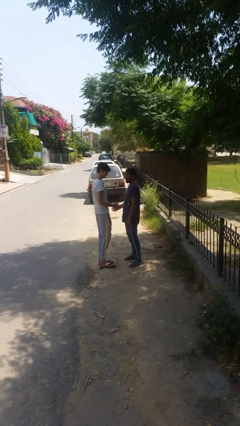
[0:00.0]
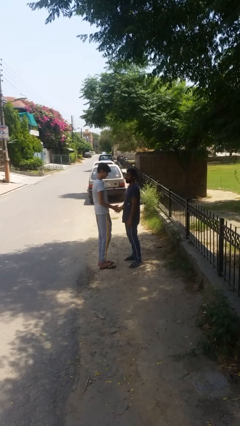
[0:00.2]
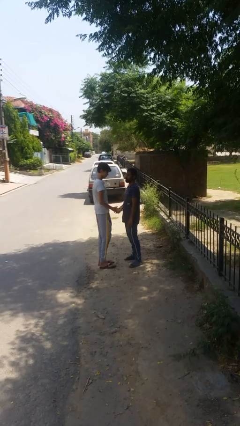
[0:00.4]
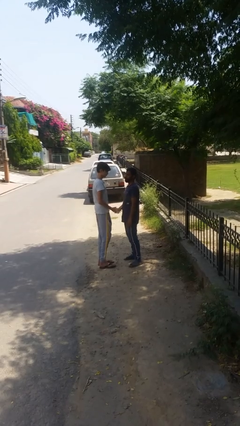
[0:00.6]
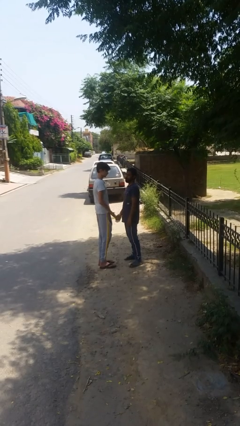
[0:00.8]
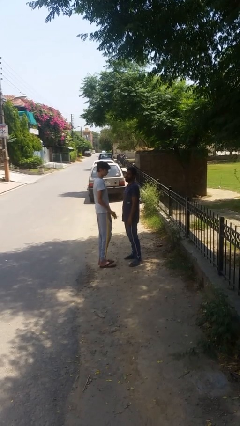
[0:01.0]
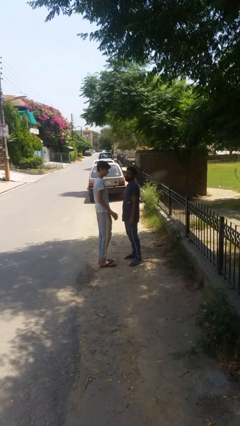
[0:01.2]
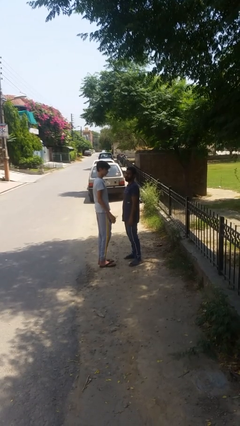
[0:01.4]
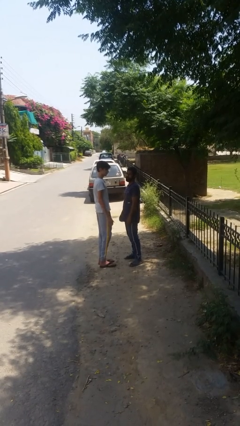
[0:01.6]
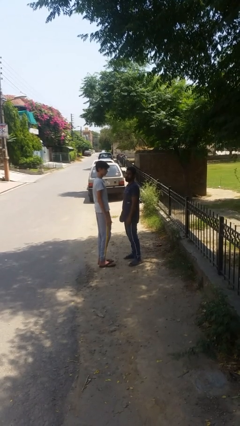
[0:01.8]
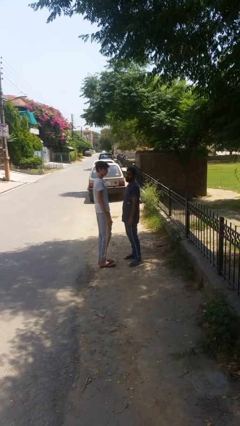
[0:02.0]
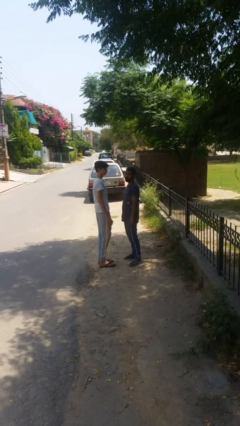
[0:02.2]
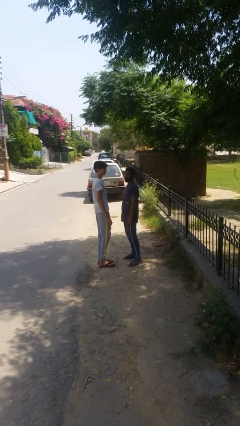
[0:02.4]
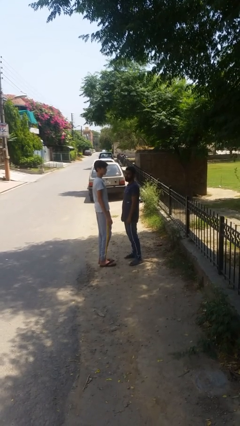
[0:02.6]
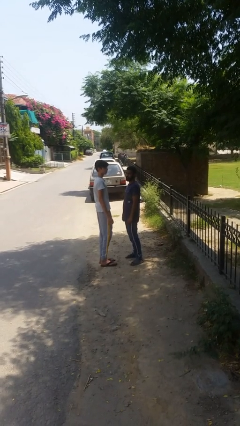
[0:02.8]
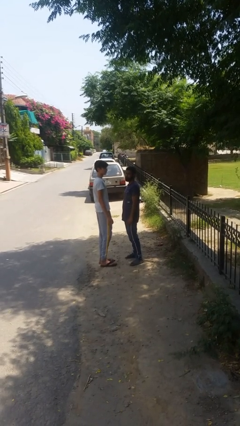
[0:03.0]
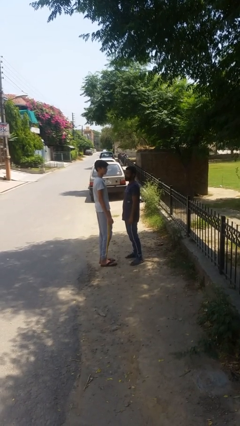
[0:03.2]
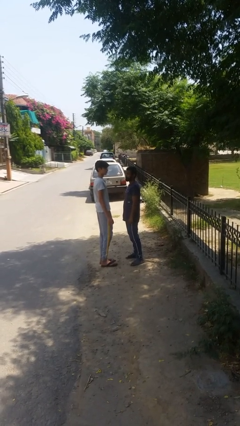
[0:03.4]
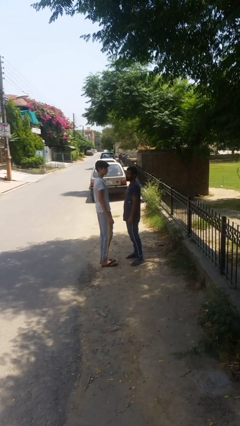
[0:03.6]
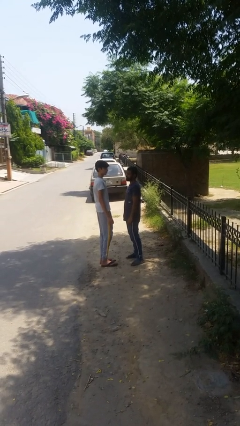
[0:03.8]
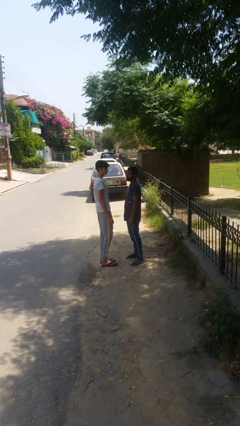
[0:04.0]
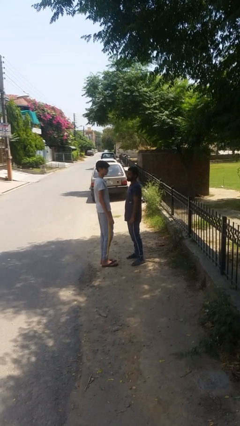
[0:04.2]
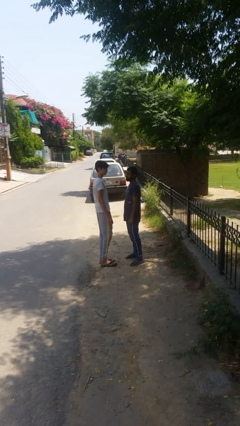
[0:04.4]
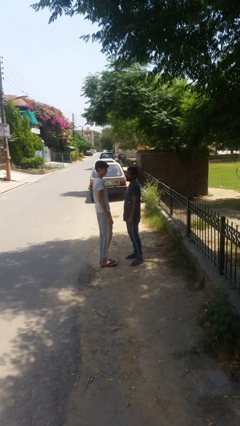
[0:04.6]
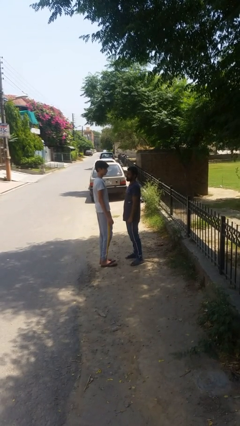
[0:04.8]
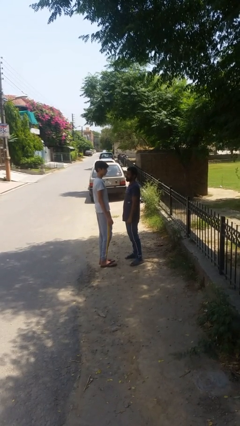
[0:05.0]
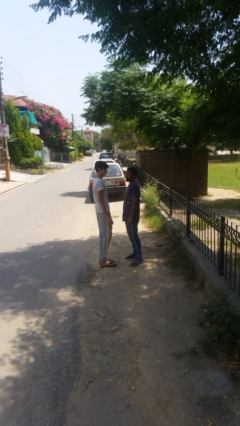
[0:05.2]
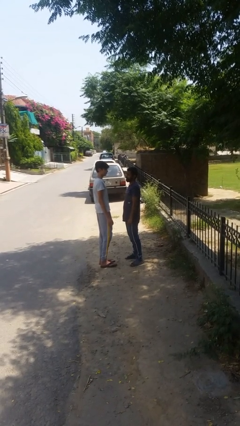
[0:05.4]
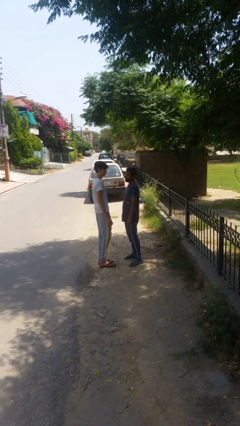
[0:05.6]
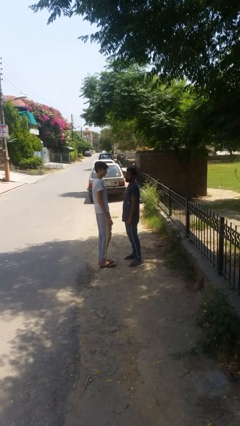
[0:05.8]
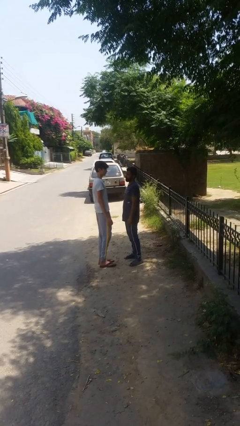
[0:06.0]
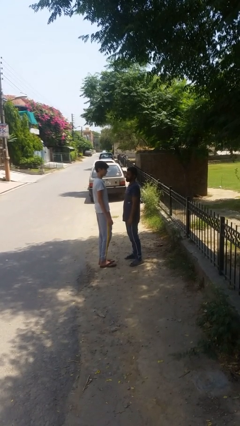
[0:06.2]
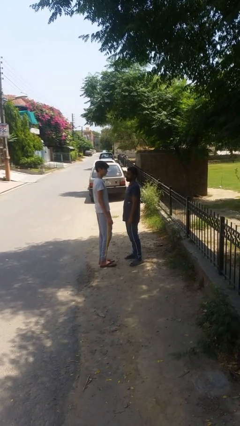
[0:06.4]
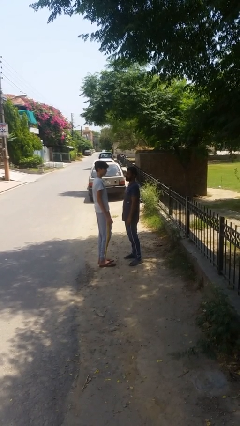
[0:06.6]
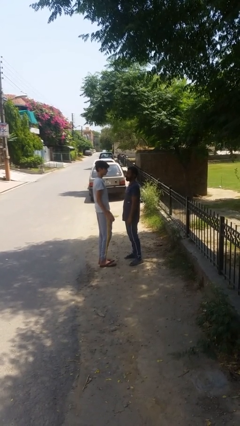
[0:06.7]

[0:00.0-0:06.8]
person highfives hand

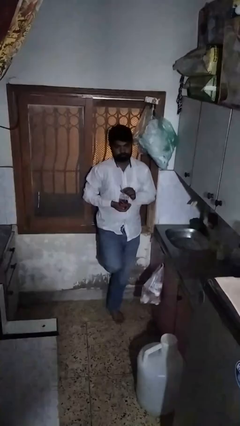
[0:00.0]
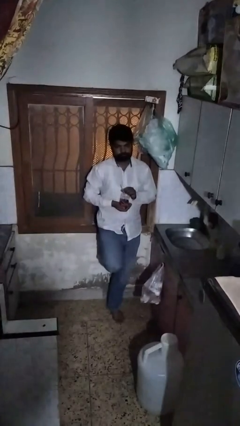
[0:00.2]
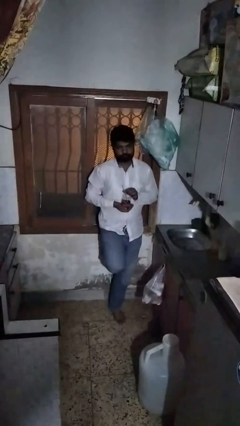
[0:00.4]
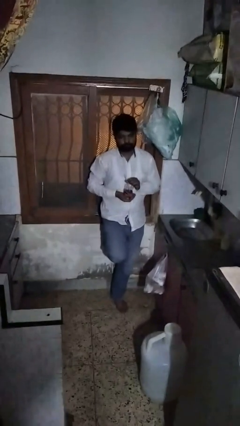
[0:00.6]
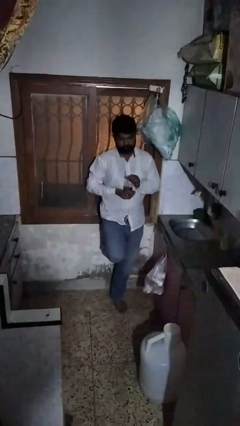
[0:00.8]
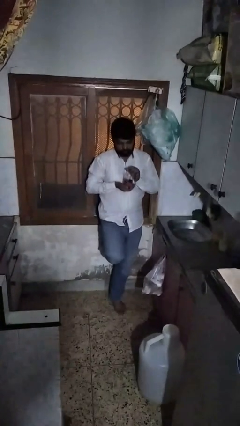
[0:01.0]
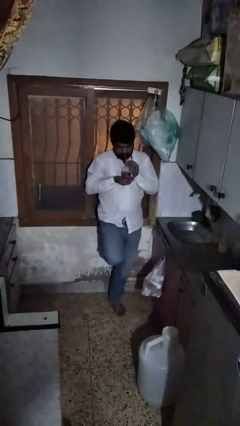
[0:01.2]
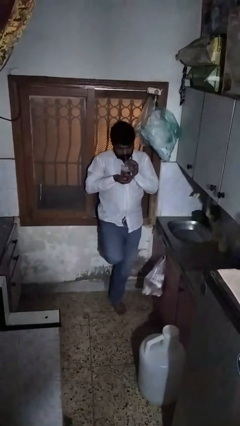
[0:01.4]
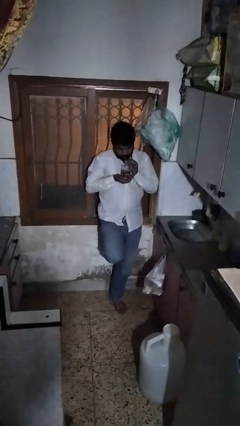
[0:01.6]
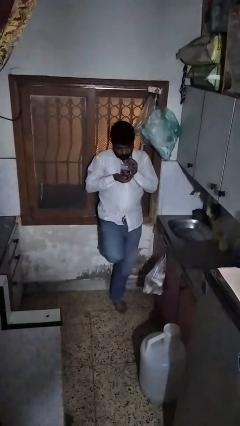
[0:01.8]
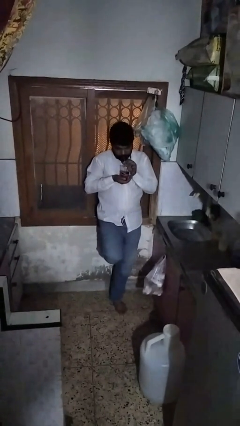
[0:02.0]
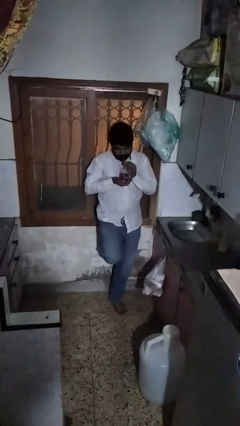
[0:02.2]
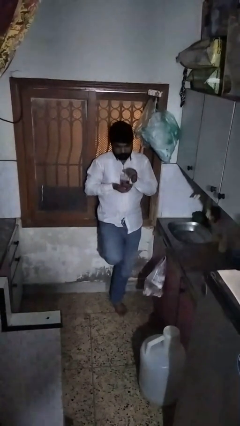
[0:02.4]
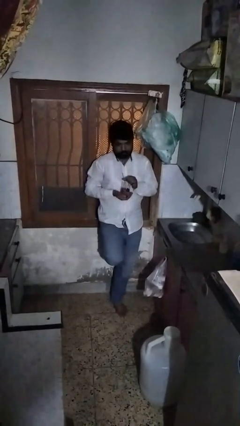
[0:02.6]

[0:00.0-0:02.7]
person drinks from straw

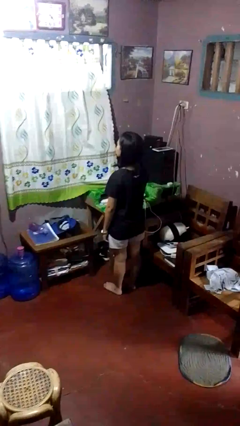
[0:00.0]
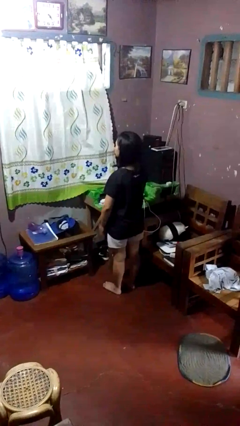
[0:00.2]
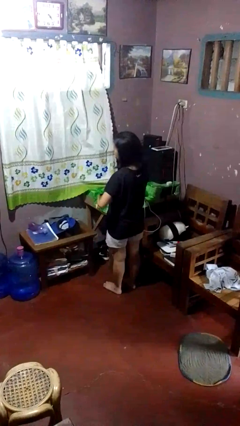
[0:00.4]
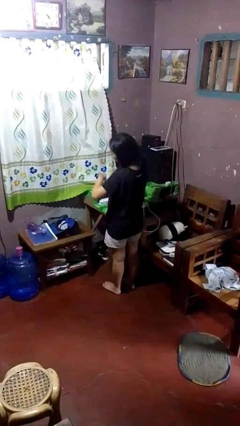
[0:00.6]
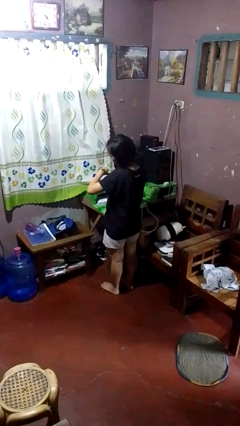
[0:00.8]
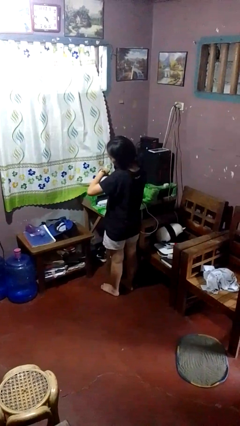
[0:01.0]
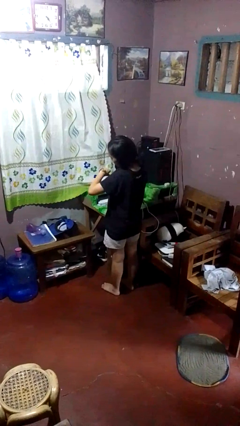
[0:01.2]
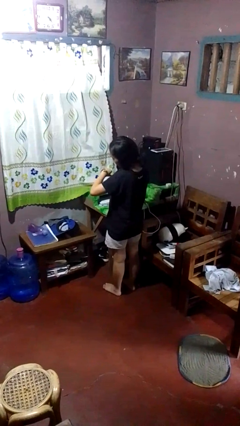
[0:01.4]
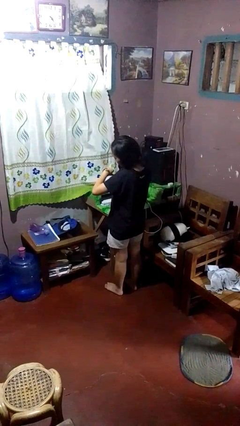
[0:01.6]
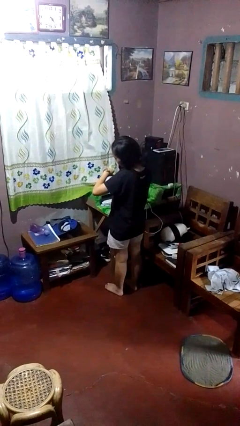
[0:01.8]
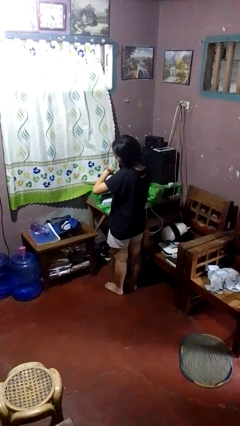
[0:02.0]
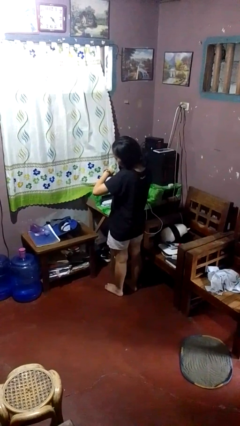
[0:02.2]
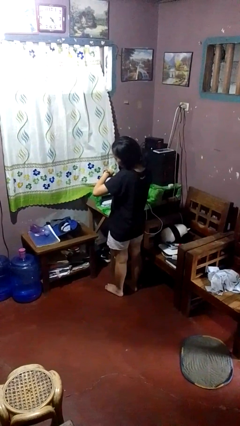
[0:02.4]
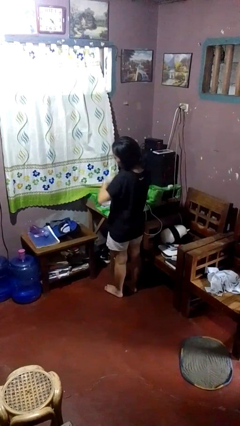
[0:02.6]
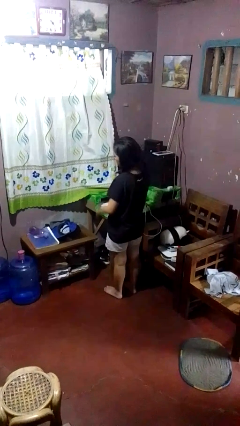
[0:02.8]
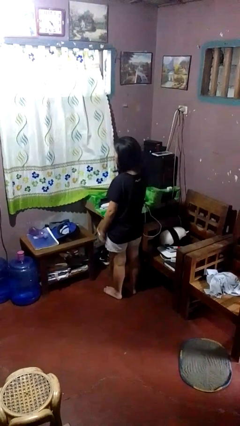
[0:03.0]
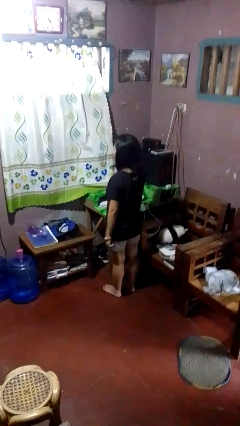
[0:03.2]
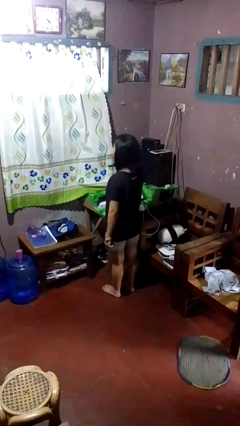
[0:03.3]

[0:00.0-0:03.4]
person looks at wristwatch

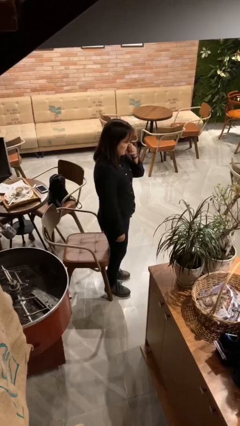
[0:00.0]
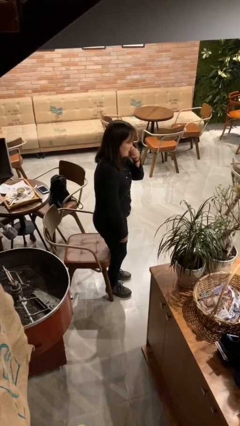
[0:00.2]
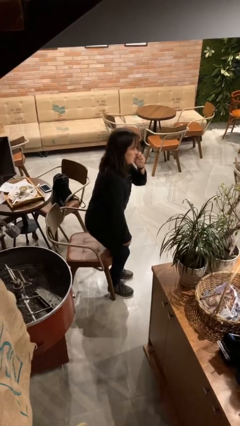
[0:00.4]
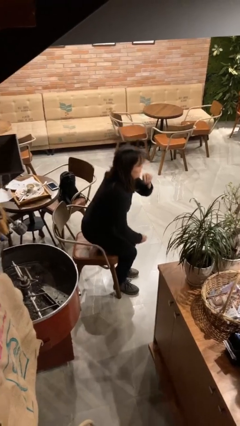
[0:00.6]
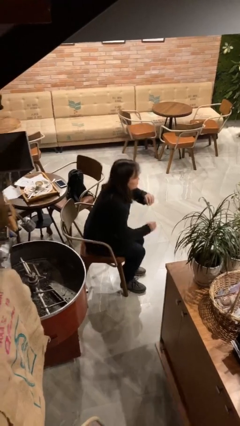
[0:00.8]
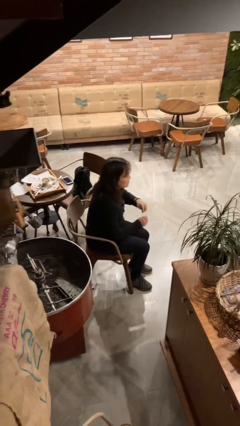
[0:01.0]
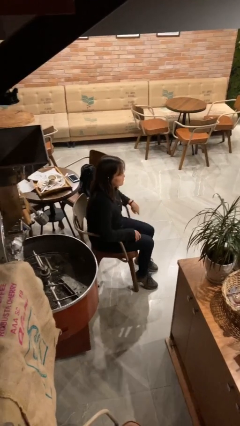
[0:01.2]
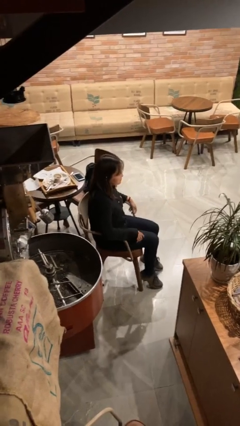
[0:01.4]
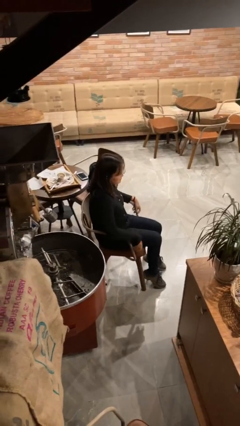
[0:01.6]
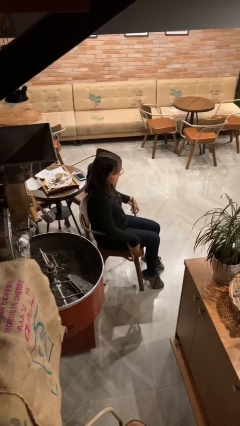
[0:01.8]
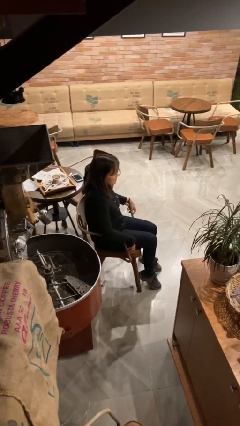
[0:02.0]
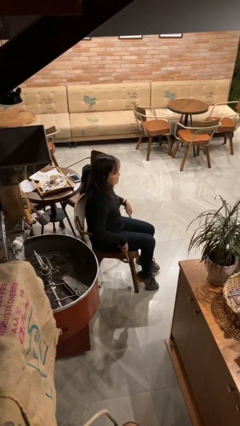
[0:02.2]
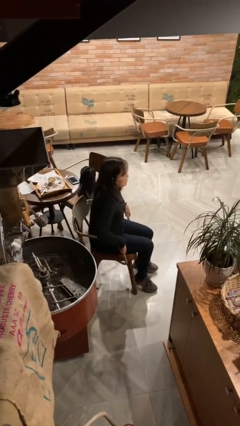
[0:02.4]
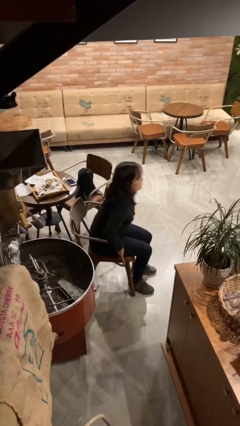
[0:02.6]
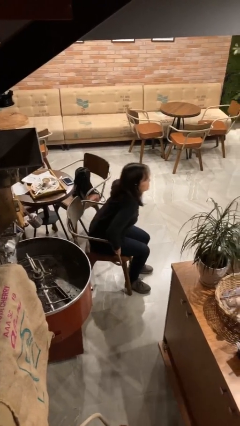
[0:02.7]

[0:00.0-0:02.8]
person sits down

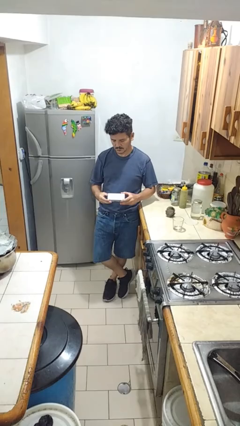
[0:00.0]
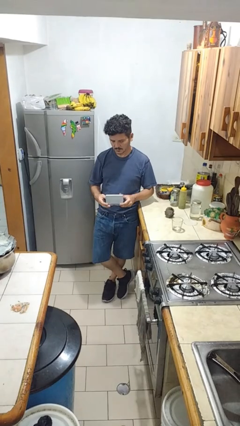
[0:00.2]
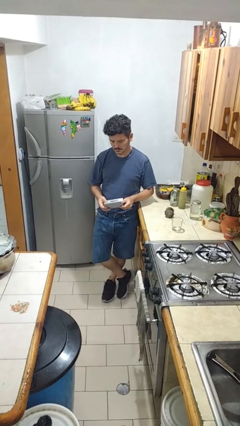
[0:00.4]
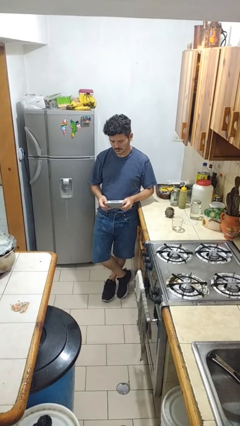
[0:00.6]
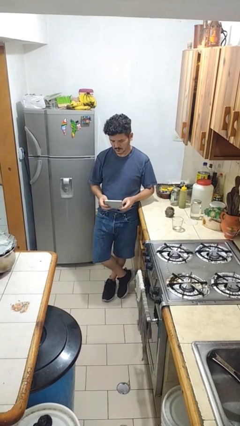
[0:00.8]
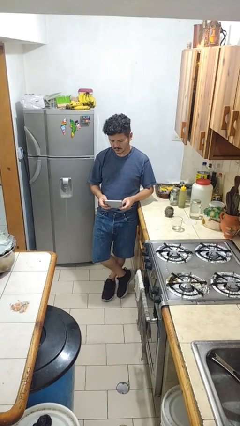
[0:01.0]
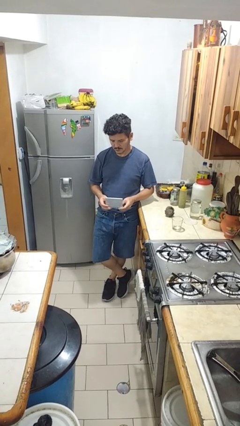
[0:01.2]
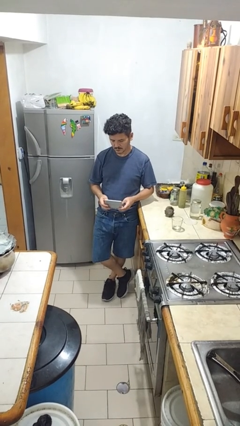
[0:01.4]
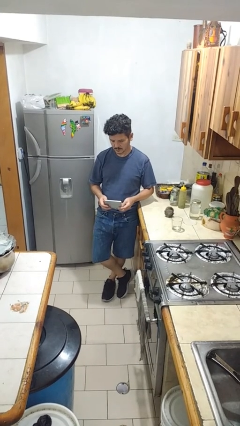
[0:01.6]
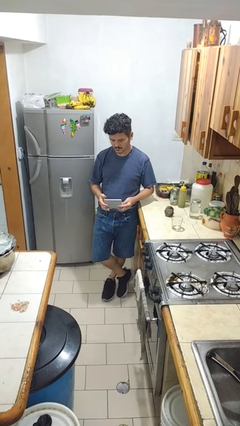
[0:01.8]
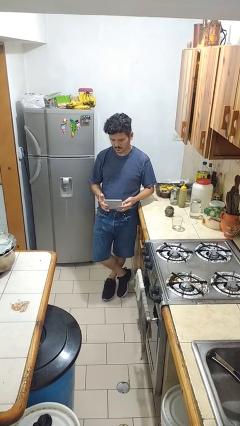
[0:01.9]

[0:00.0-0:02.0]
person interacts with handheld game
